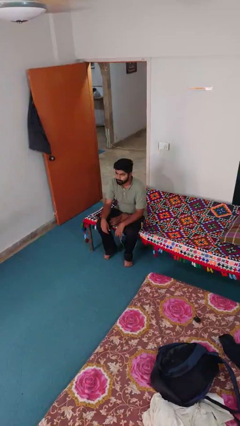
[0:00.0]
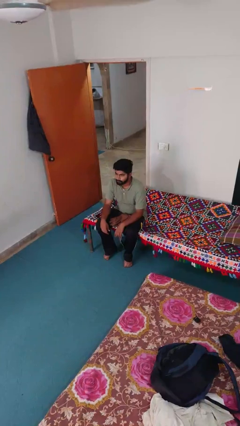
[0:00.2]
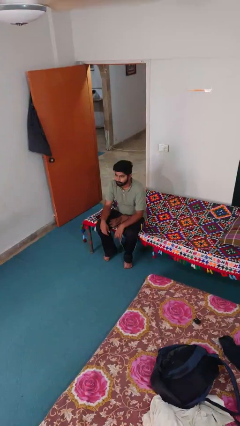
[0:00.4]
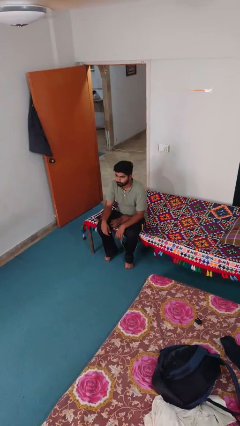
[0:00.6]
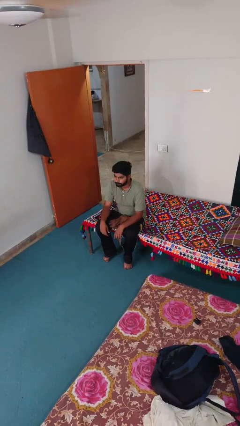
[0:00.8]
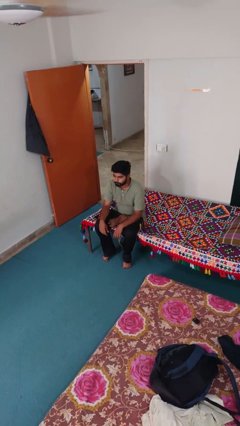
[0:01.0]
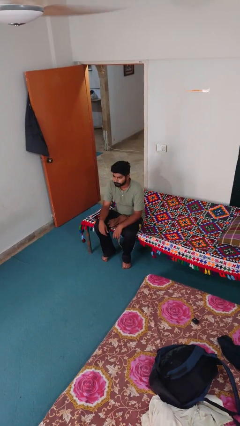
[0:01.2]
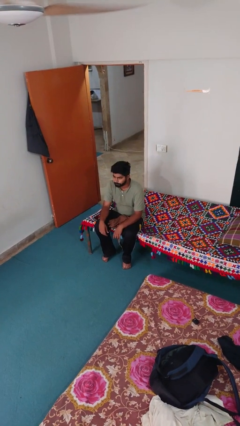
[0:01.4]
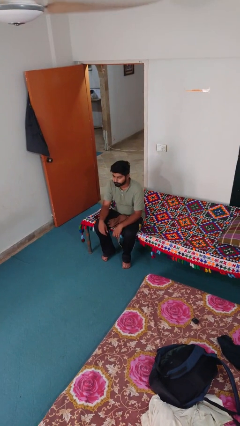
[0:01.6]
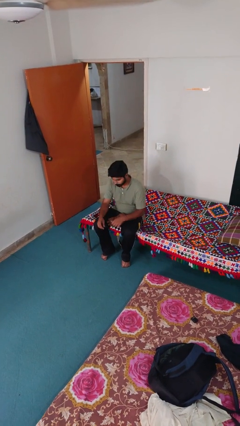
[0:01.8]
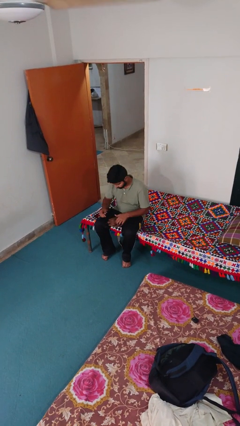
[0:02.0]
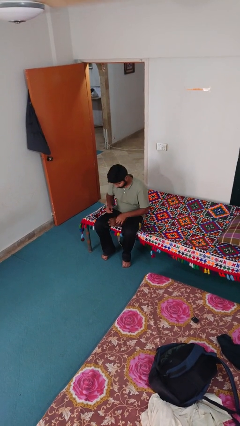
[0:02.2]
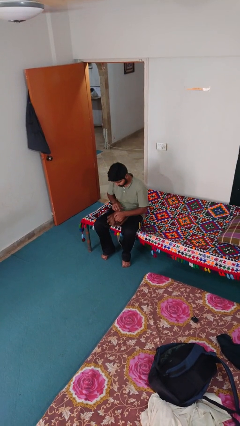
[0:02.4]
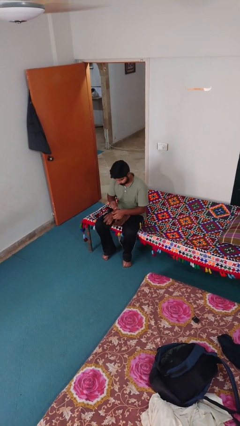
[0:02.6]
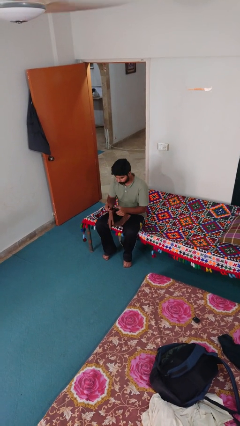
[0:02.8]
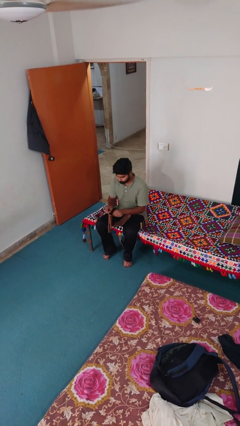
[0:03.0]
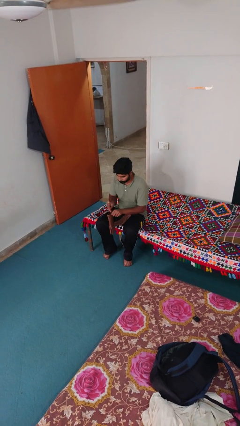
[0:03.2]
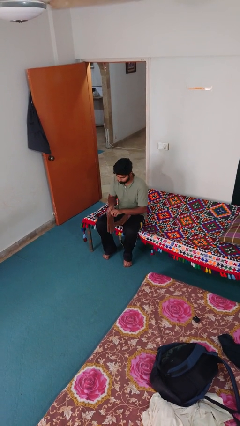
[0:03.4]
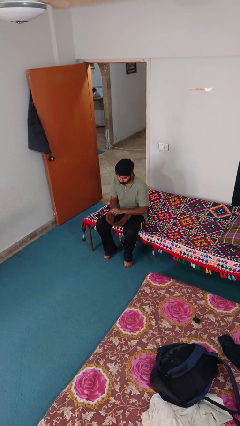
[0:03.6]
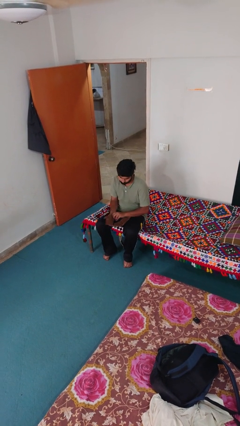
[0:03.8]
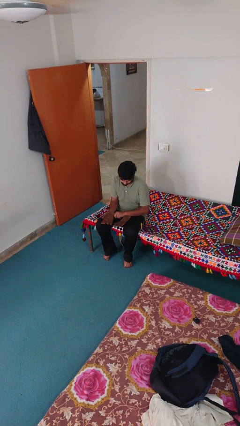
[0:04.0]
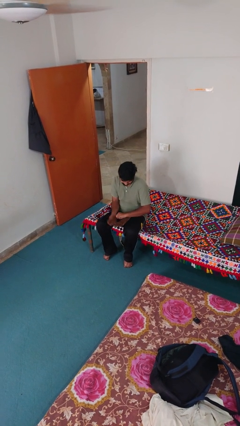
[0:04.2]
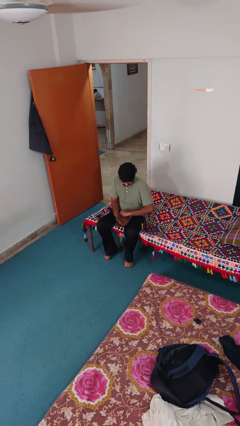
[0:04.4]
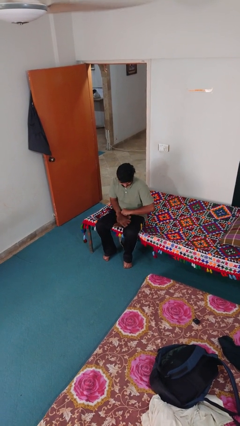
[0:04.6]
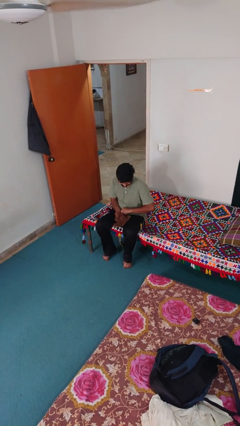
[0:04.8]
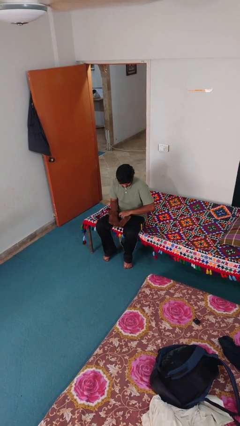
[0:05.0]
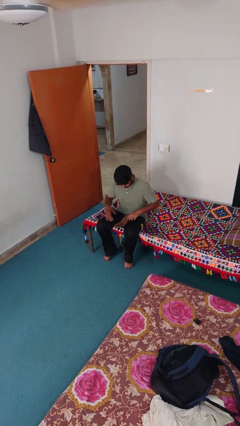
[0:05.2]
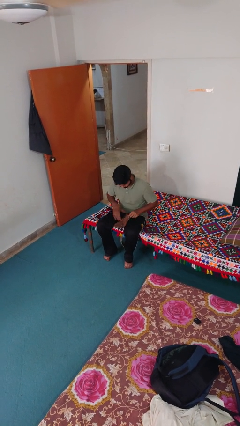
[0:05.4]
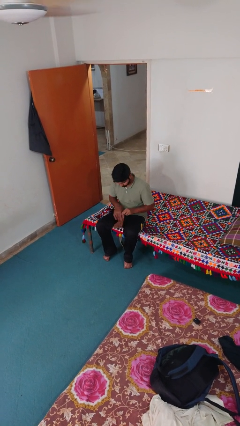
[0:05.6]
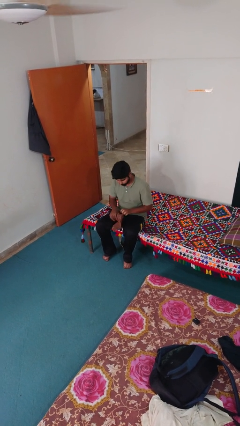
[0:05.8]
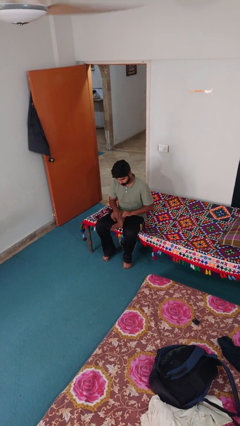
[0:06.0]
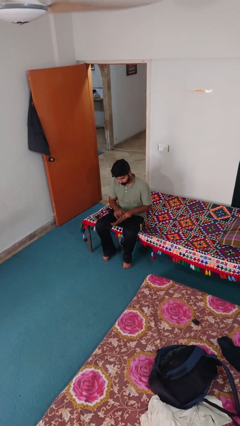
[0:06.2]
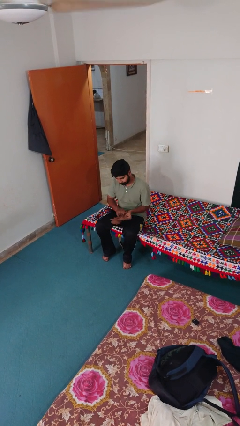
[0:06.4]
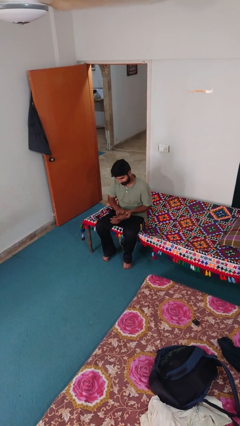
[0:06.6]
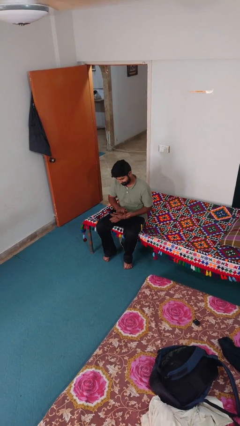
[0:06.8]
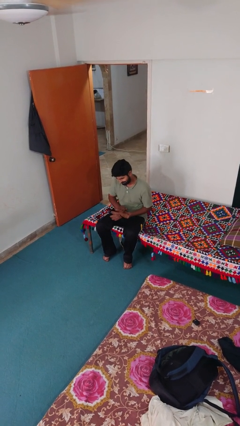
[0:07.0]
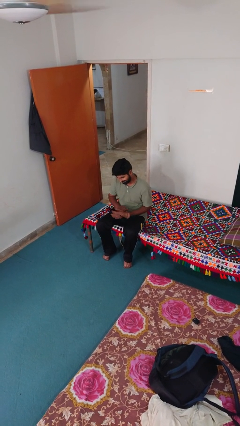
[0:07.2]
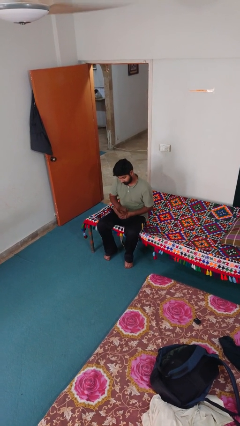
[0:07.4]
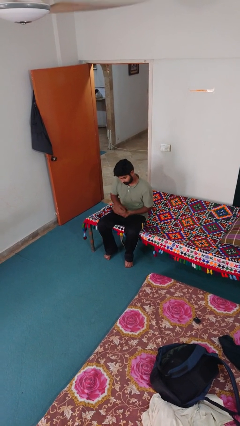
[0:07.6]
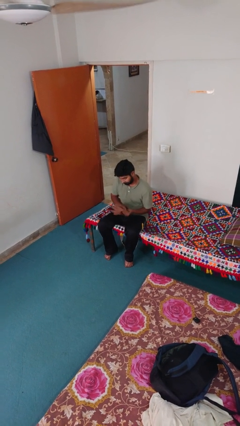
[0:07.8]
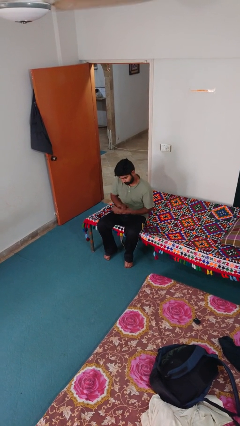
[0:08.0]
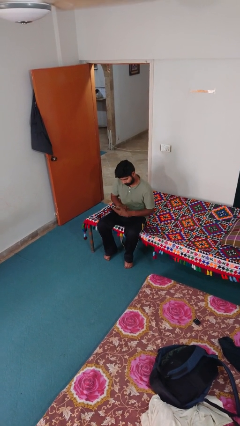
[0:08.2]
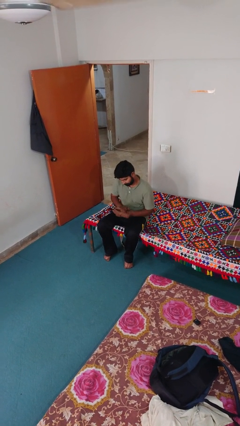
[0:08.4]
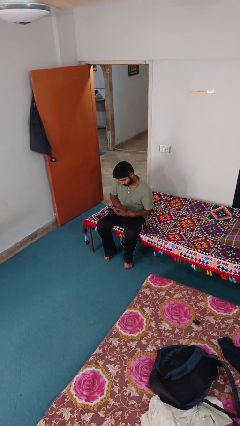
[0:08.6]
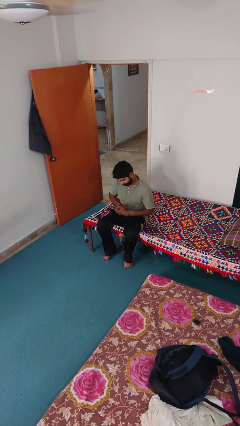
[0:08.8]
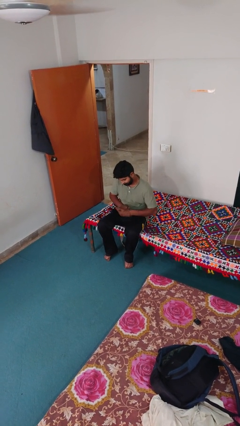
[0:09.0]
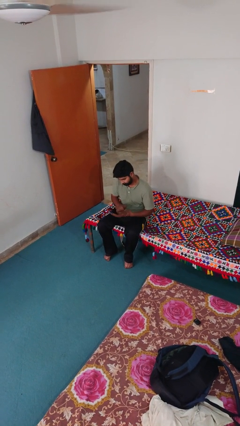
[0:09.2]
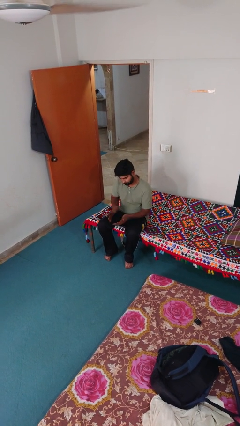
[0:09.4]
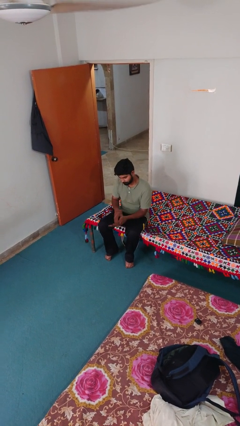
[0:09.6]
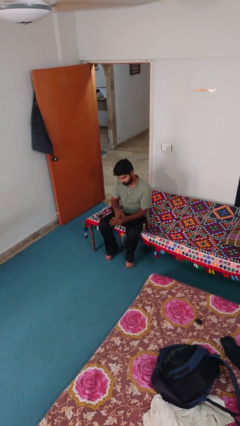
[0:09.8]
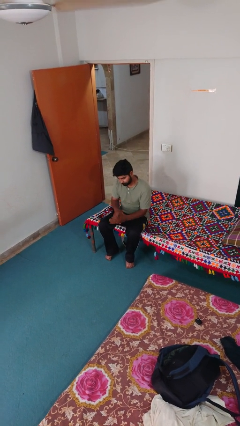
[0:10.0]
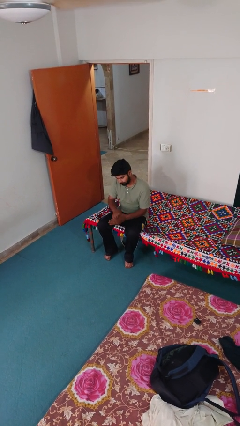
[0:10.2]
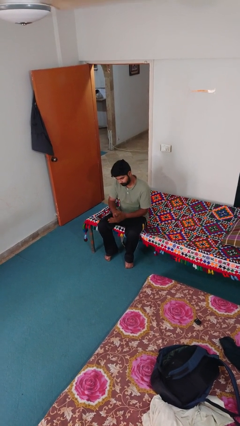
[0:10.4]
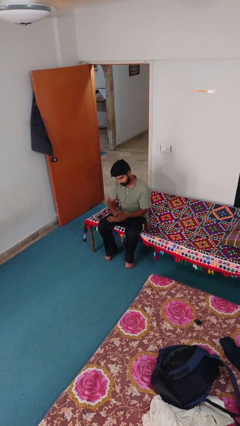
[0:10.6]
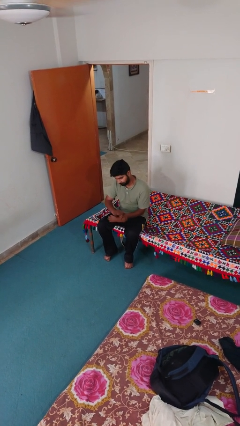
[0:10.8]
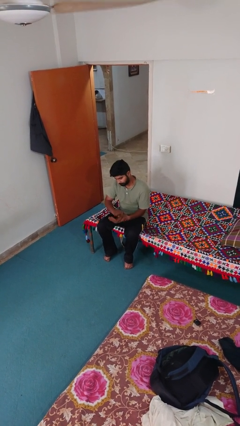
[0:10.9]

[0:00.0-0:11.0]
person puts on gloves

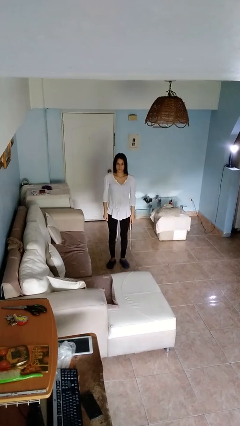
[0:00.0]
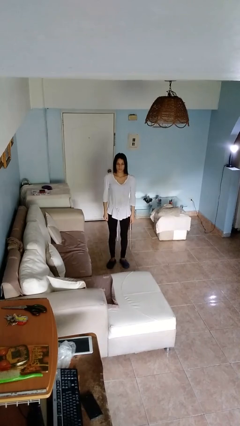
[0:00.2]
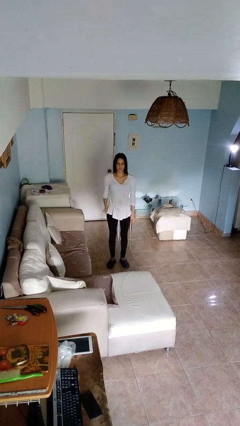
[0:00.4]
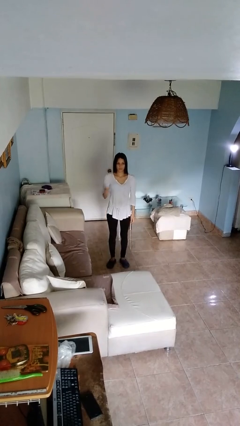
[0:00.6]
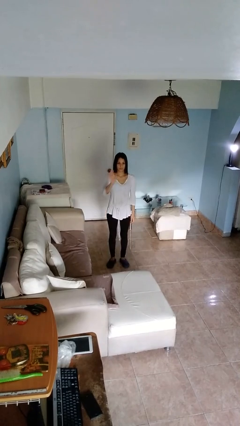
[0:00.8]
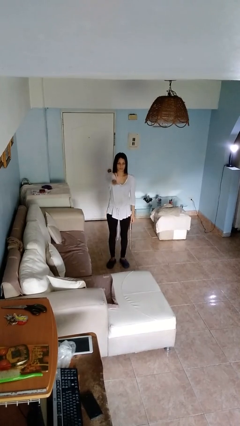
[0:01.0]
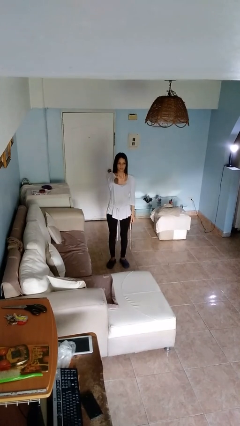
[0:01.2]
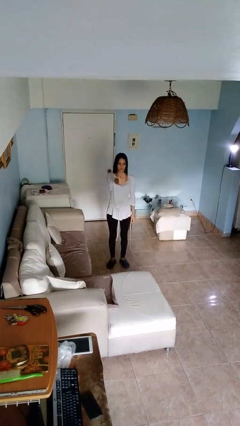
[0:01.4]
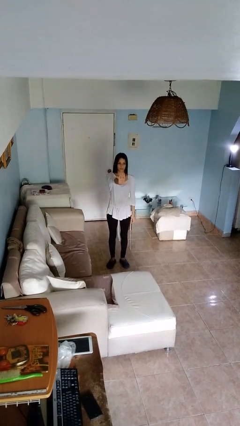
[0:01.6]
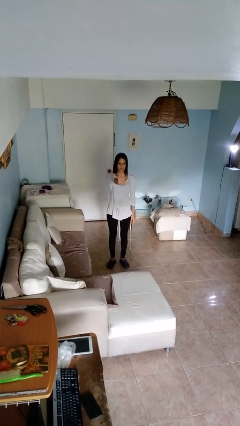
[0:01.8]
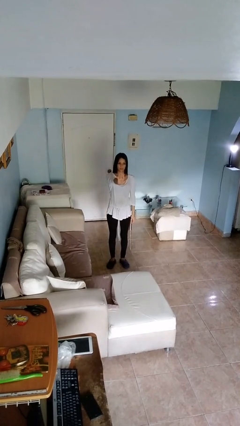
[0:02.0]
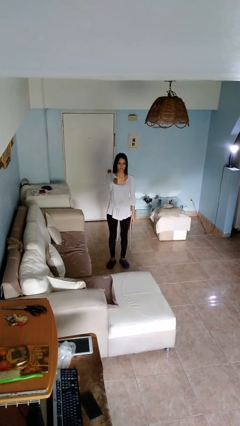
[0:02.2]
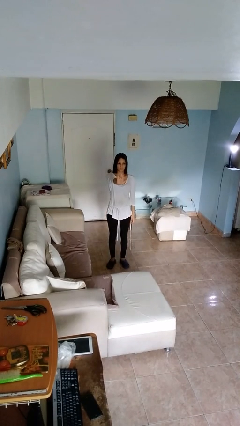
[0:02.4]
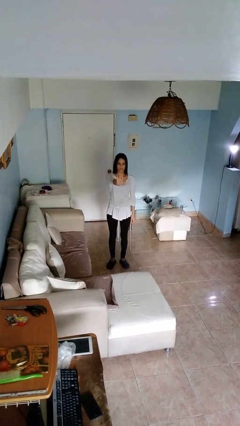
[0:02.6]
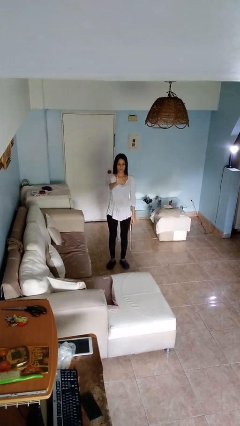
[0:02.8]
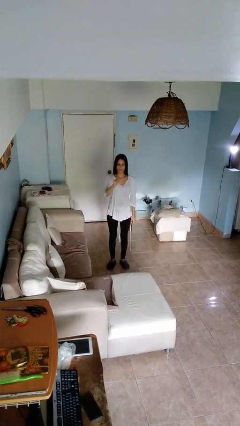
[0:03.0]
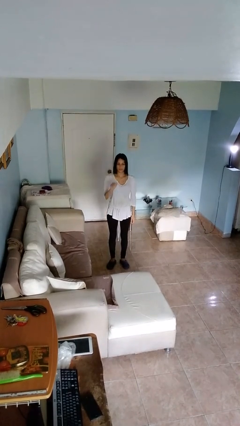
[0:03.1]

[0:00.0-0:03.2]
person gestures stop

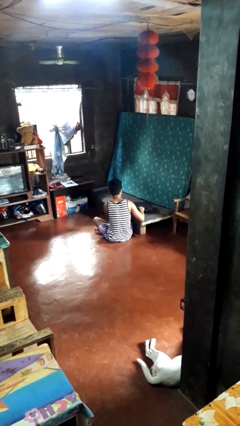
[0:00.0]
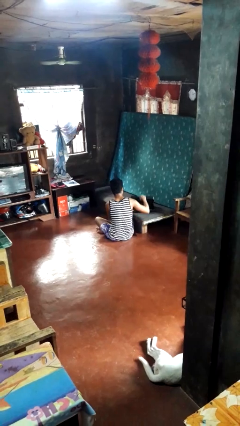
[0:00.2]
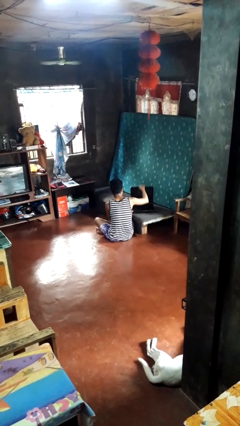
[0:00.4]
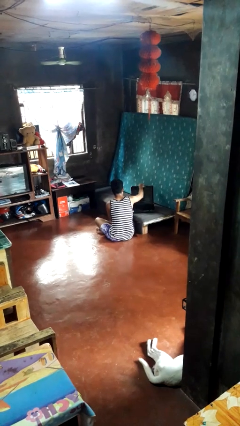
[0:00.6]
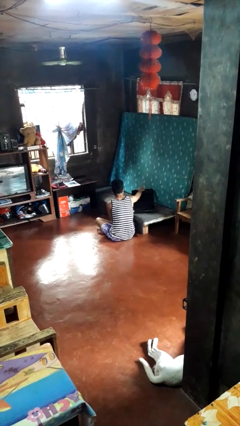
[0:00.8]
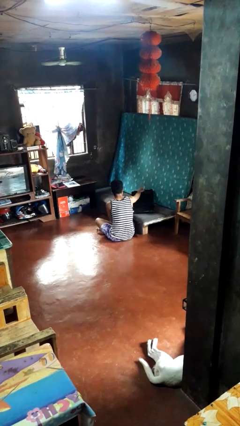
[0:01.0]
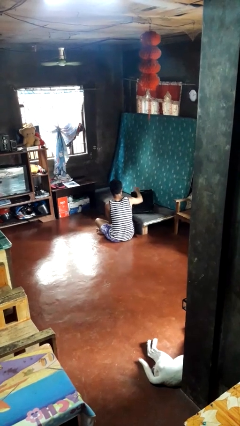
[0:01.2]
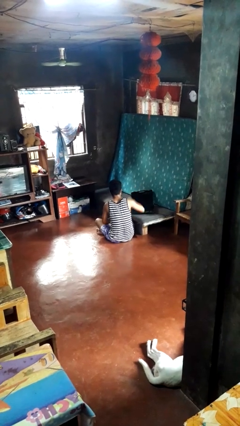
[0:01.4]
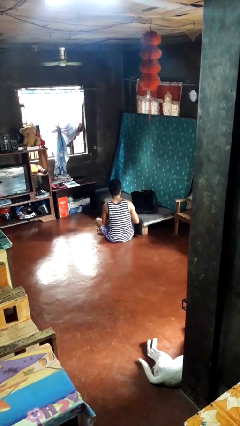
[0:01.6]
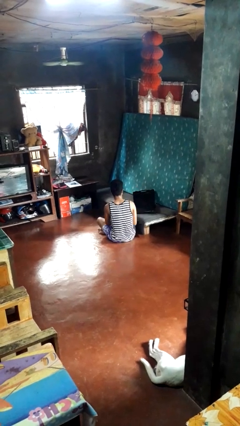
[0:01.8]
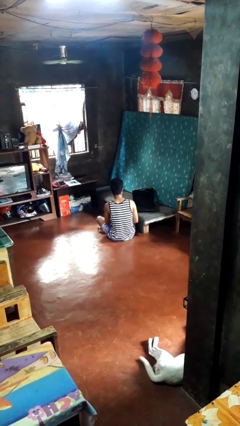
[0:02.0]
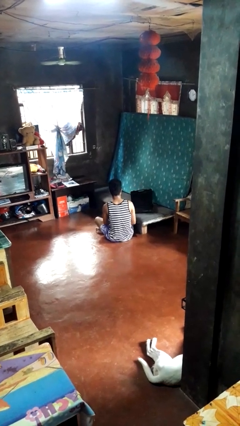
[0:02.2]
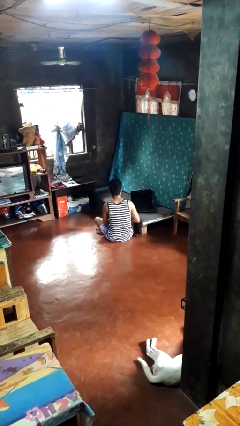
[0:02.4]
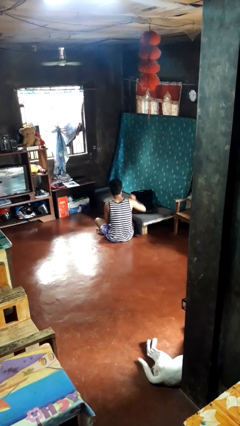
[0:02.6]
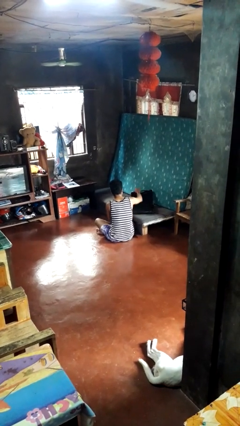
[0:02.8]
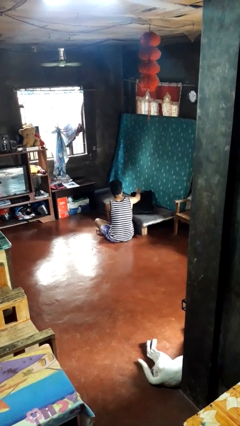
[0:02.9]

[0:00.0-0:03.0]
person opens suitcase

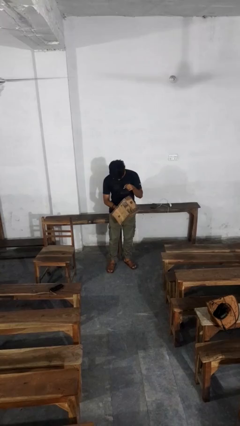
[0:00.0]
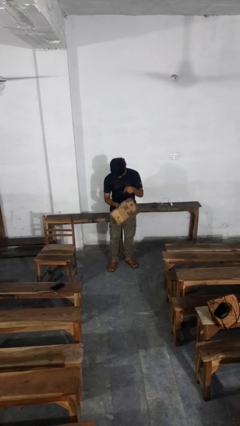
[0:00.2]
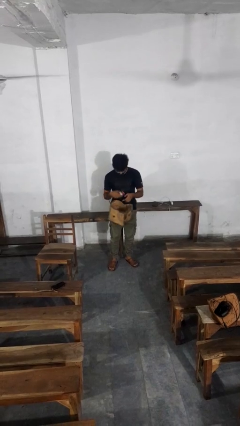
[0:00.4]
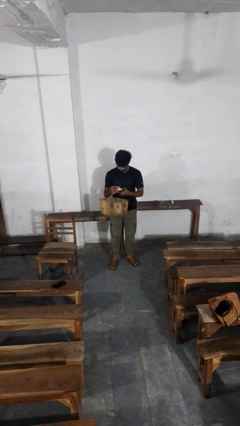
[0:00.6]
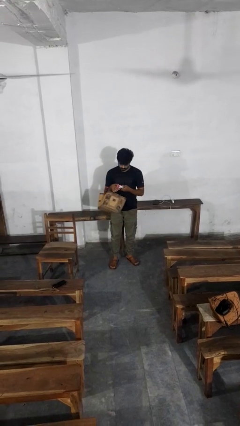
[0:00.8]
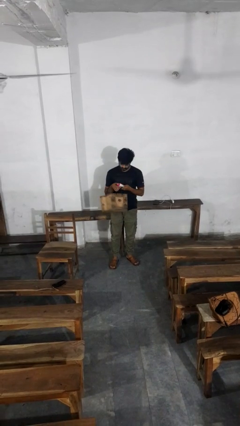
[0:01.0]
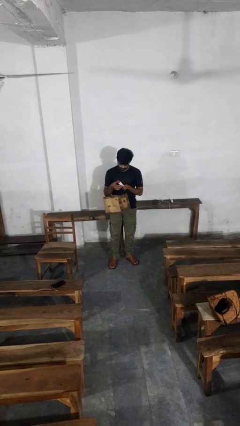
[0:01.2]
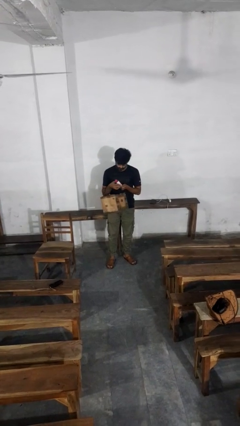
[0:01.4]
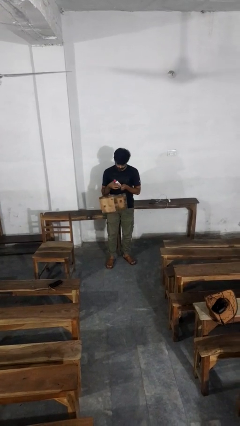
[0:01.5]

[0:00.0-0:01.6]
person takes object from purse
